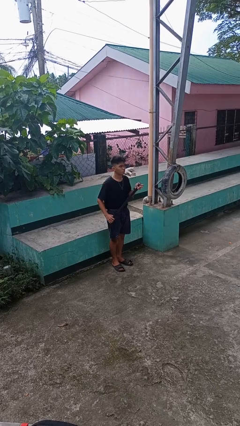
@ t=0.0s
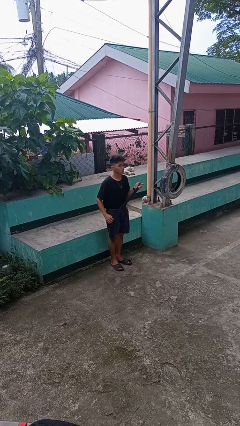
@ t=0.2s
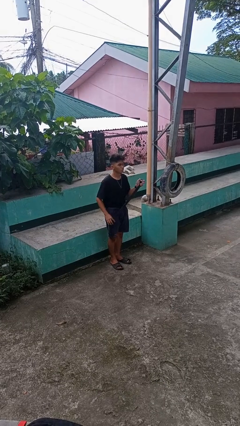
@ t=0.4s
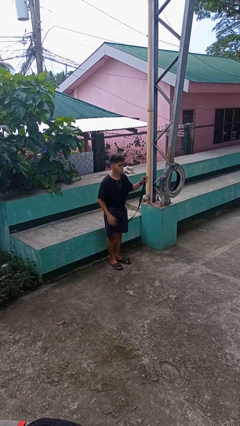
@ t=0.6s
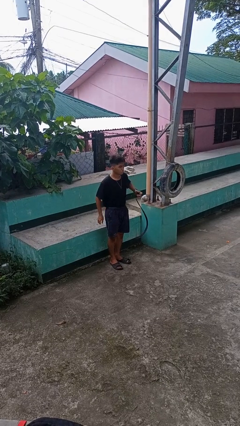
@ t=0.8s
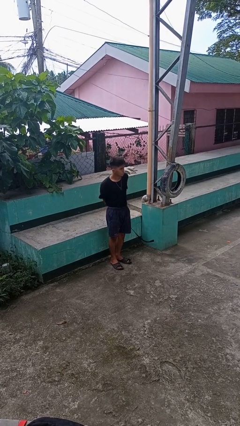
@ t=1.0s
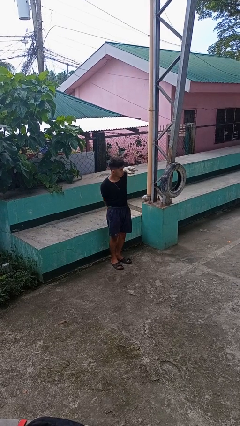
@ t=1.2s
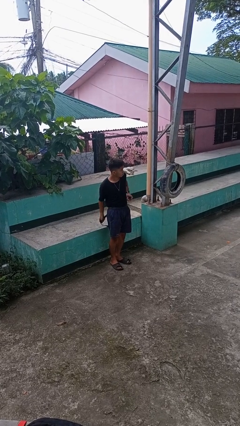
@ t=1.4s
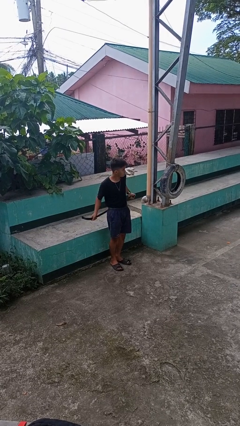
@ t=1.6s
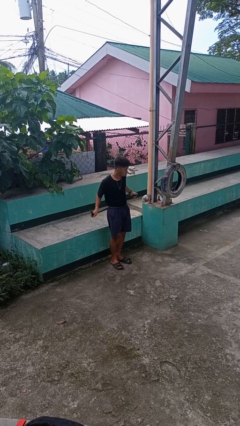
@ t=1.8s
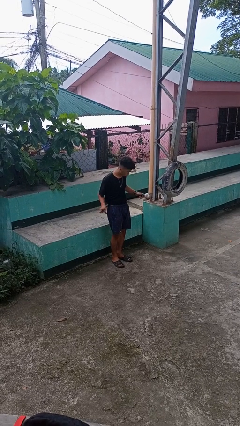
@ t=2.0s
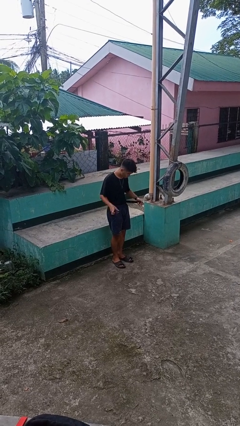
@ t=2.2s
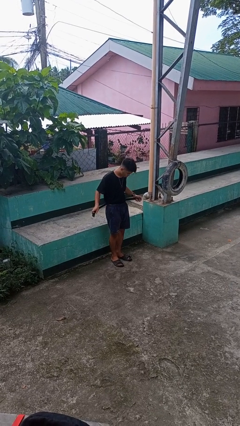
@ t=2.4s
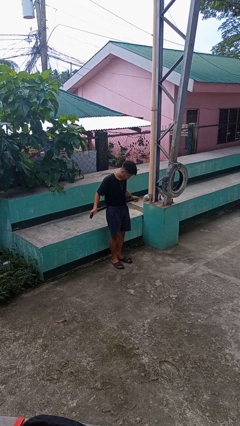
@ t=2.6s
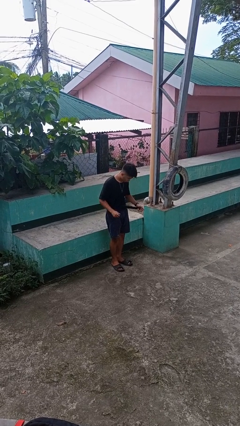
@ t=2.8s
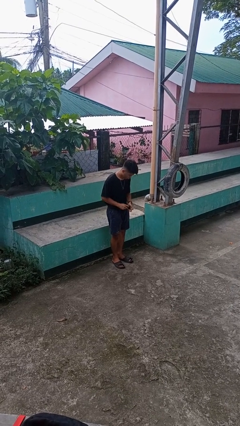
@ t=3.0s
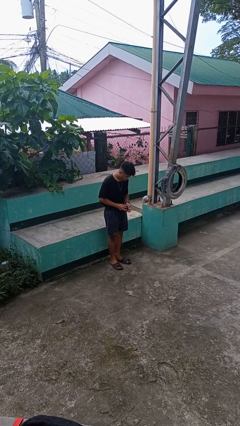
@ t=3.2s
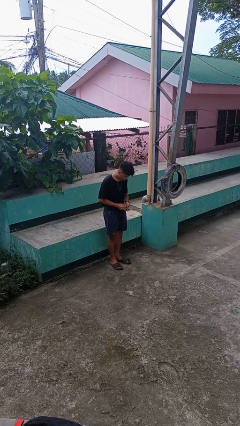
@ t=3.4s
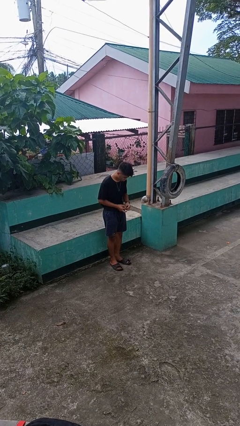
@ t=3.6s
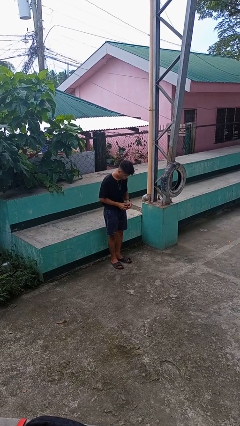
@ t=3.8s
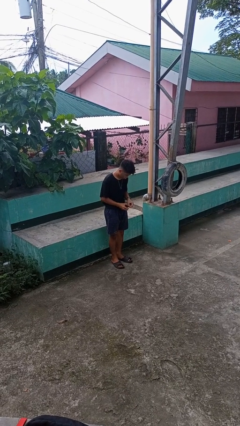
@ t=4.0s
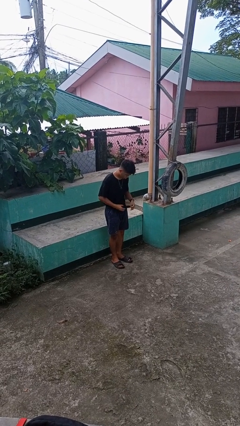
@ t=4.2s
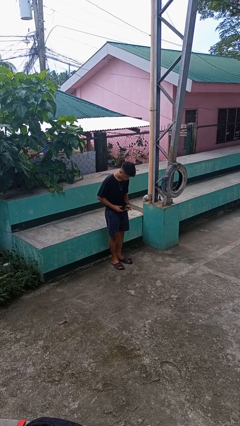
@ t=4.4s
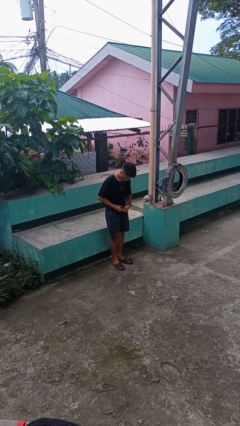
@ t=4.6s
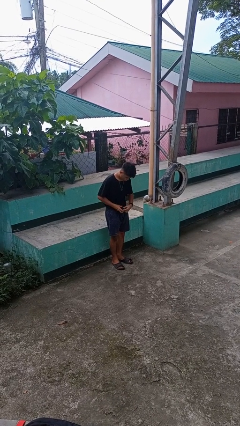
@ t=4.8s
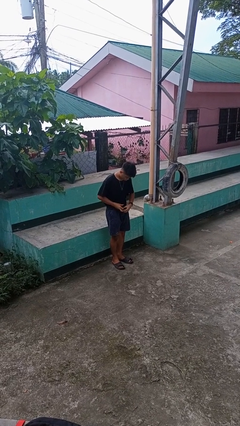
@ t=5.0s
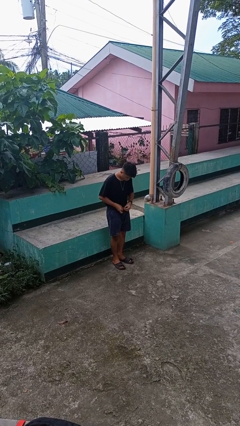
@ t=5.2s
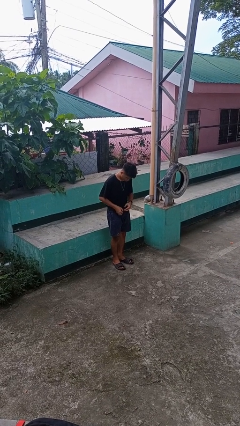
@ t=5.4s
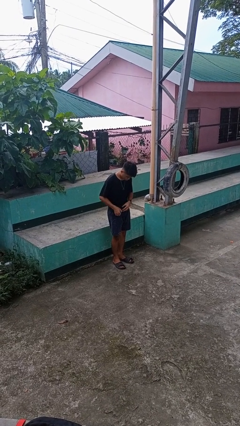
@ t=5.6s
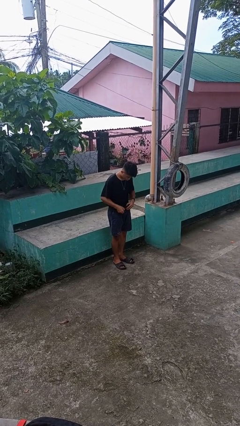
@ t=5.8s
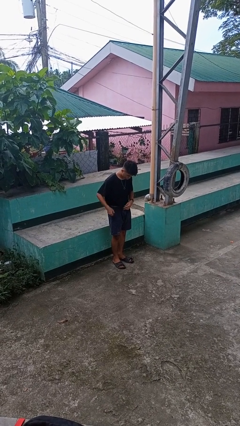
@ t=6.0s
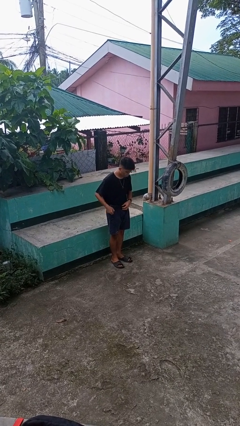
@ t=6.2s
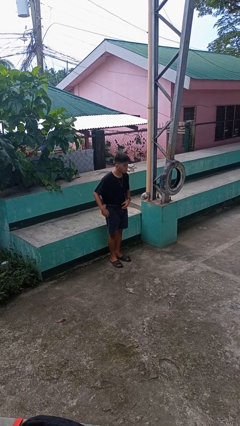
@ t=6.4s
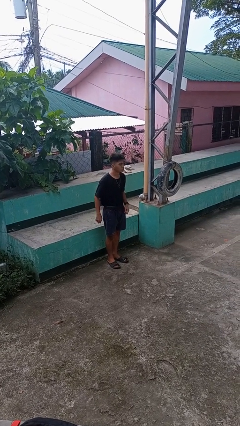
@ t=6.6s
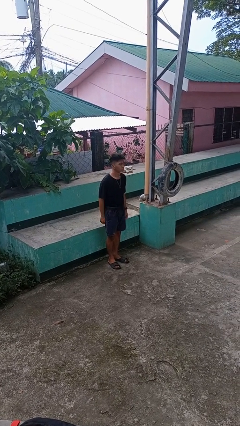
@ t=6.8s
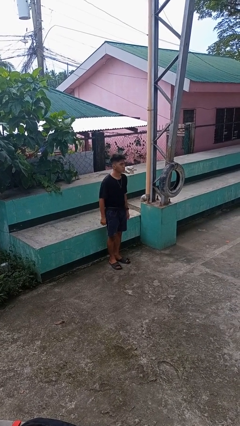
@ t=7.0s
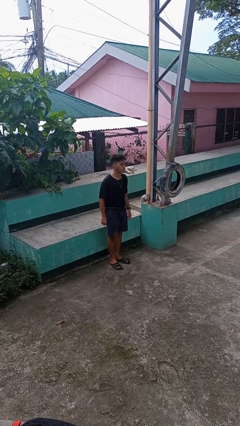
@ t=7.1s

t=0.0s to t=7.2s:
person puts on belt

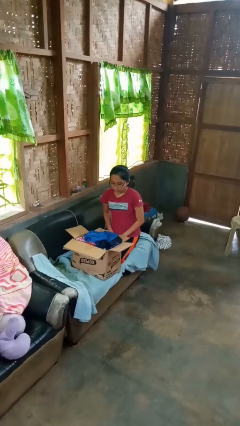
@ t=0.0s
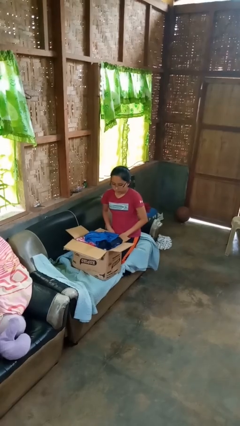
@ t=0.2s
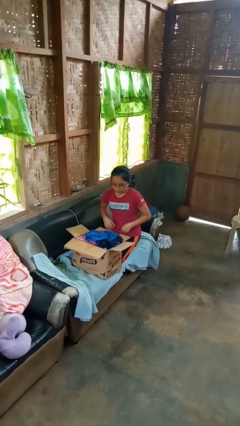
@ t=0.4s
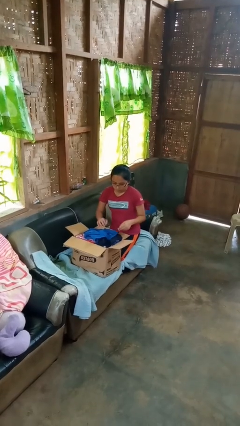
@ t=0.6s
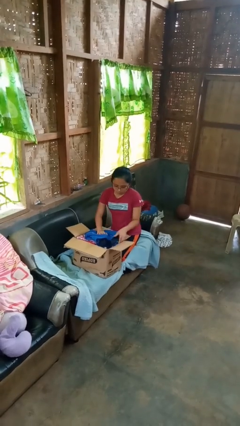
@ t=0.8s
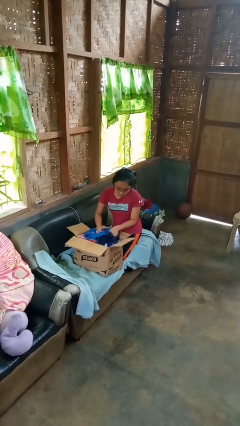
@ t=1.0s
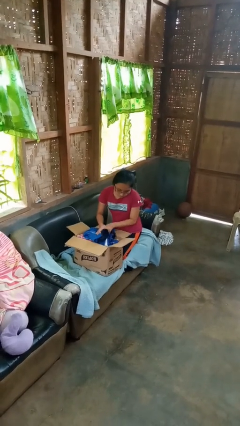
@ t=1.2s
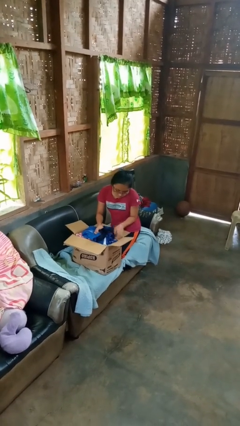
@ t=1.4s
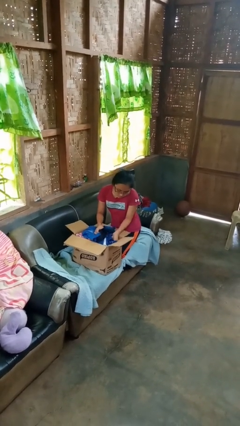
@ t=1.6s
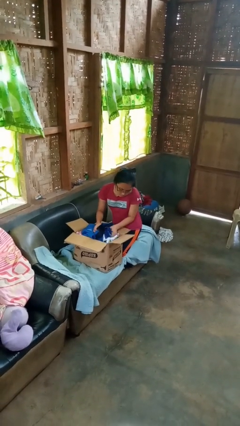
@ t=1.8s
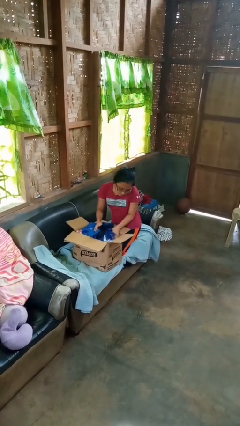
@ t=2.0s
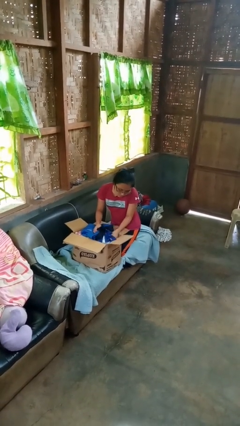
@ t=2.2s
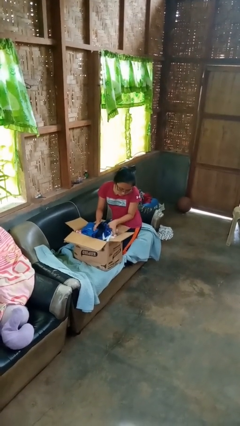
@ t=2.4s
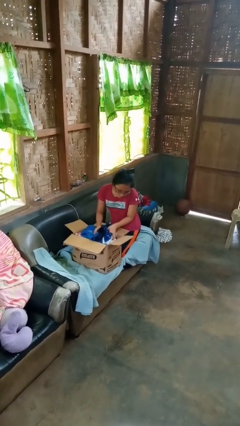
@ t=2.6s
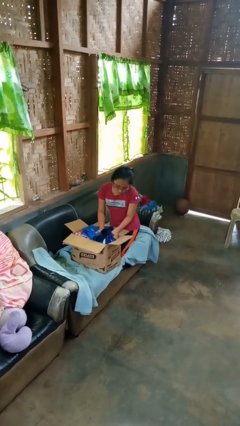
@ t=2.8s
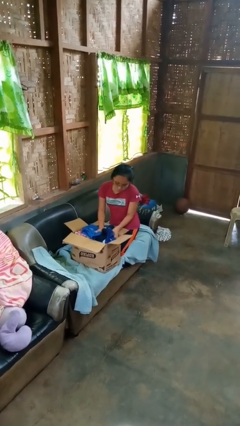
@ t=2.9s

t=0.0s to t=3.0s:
person searches in box

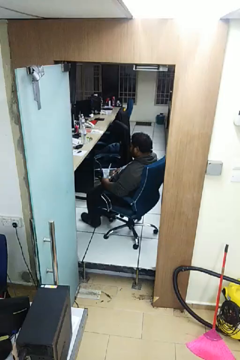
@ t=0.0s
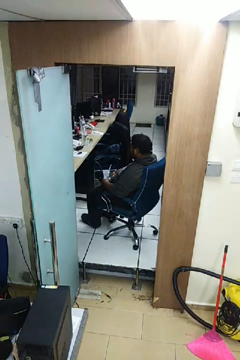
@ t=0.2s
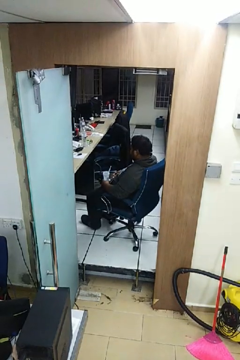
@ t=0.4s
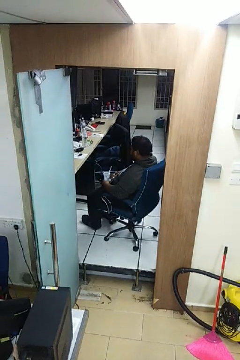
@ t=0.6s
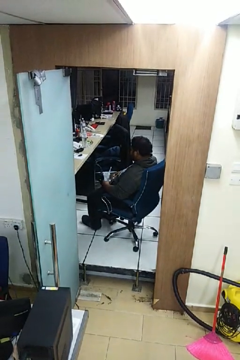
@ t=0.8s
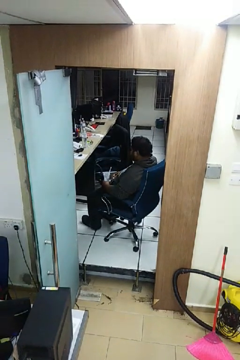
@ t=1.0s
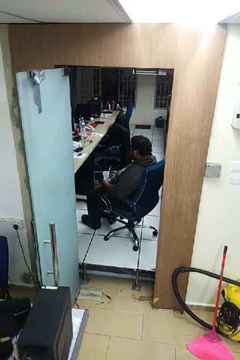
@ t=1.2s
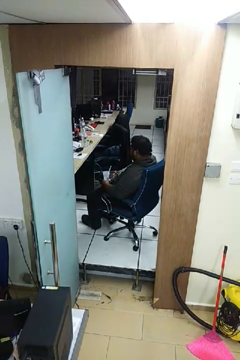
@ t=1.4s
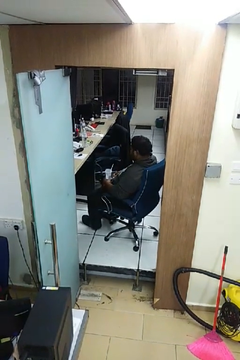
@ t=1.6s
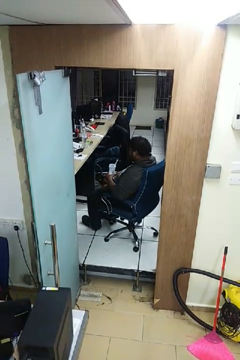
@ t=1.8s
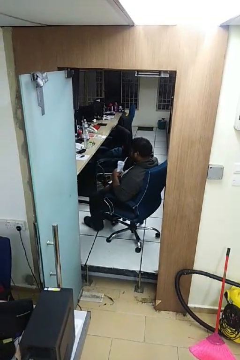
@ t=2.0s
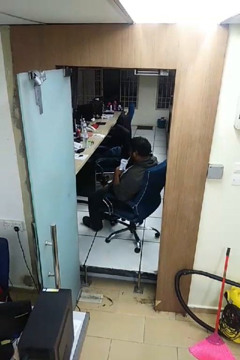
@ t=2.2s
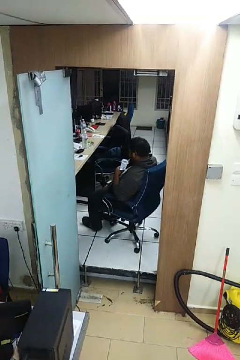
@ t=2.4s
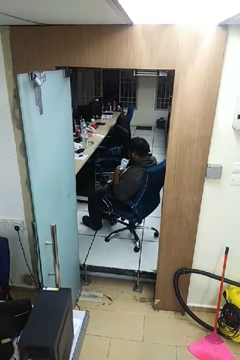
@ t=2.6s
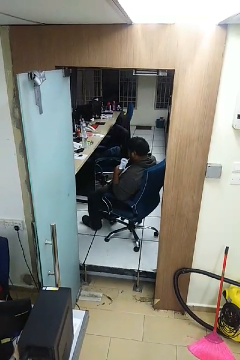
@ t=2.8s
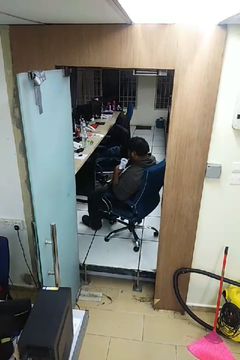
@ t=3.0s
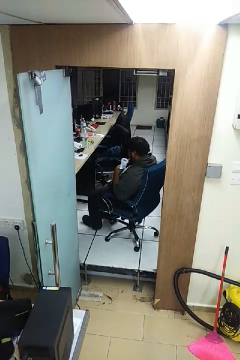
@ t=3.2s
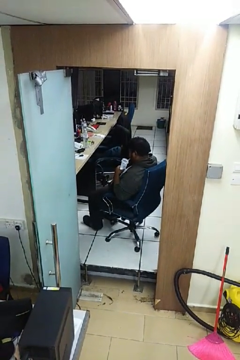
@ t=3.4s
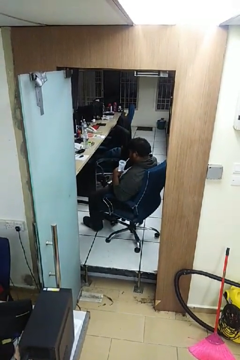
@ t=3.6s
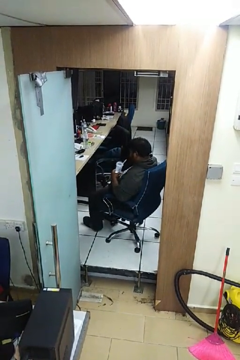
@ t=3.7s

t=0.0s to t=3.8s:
person drinks from straw

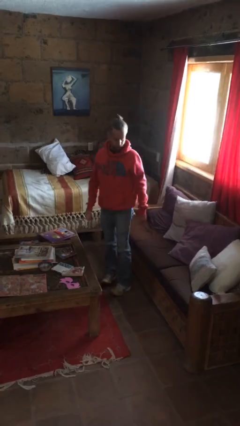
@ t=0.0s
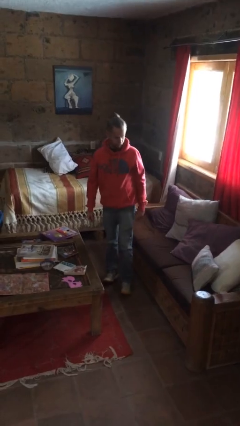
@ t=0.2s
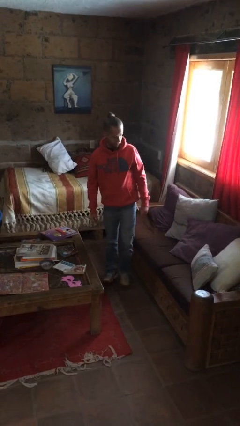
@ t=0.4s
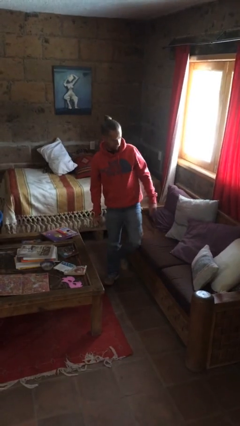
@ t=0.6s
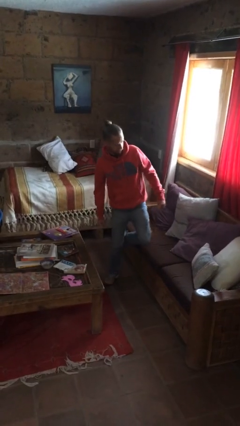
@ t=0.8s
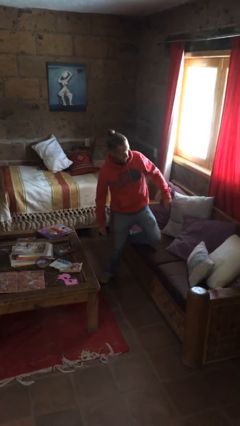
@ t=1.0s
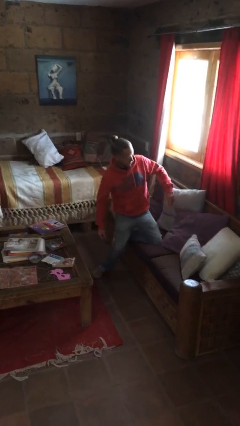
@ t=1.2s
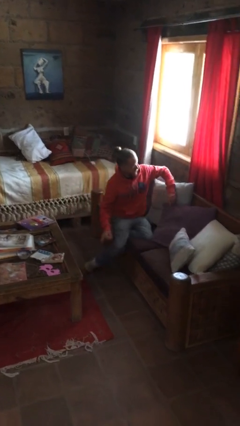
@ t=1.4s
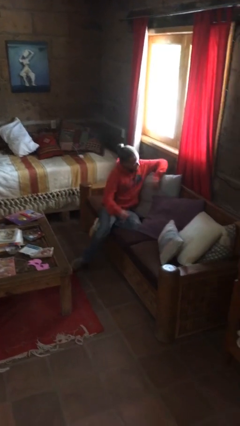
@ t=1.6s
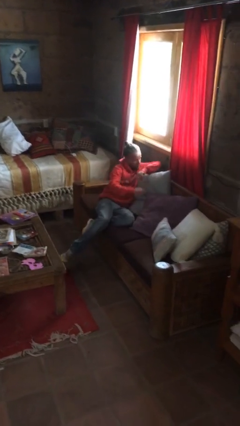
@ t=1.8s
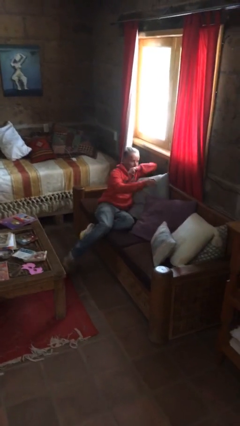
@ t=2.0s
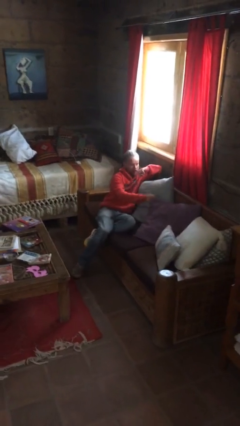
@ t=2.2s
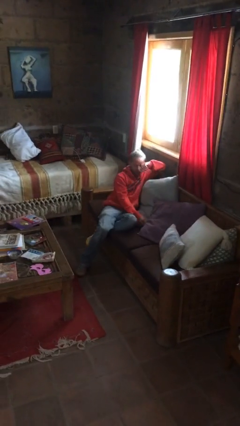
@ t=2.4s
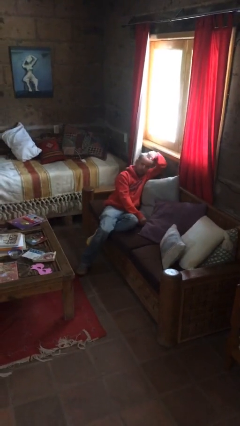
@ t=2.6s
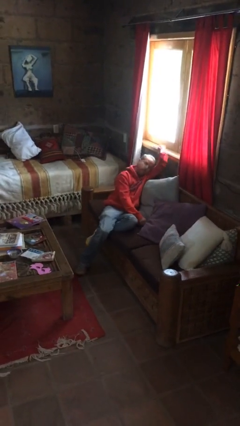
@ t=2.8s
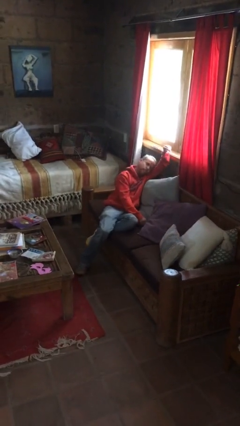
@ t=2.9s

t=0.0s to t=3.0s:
person lies down on couch

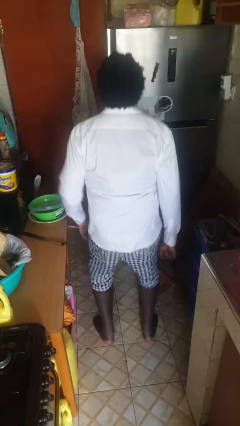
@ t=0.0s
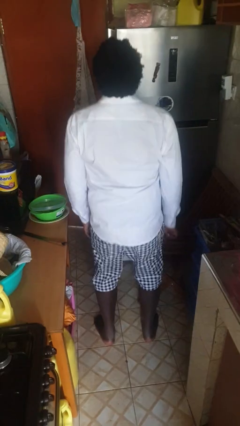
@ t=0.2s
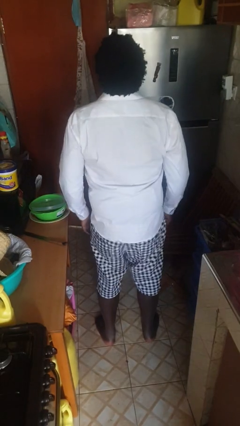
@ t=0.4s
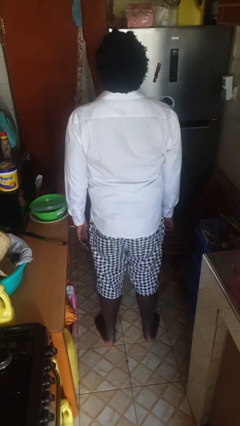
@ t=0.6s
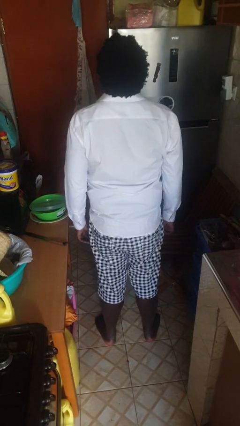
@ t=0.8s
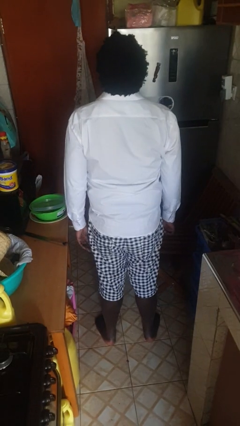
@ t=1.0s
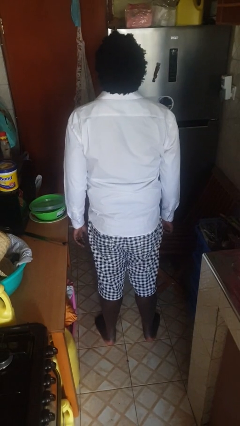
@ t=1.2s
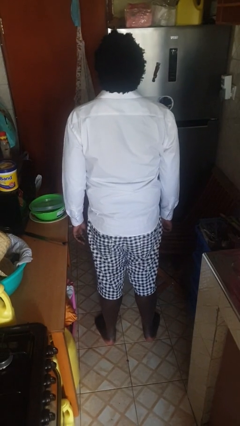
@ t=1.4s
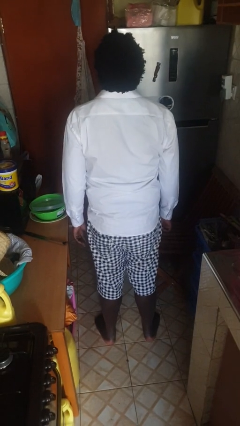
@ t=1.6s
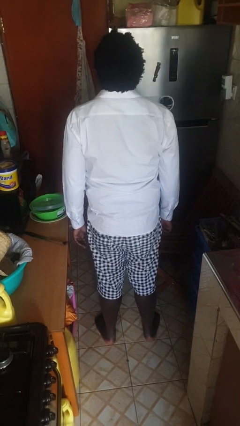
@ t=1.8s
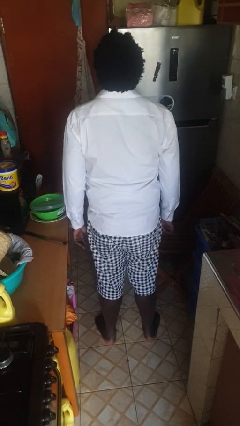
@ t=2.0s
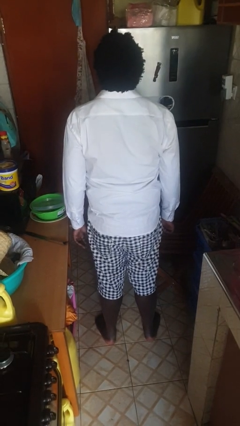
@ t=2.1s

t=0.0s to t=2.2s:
person jumps
